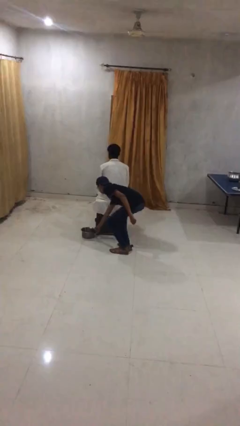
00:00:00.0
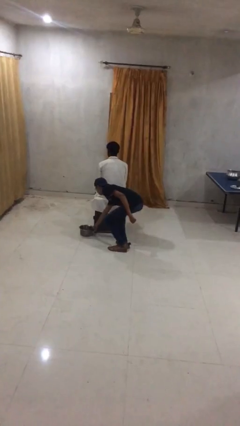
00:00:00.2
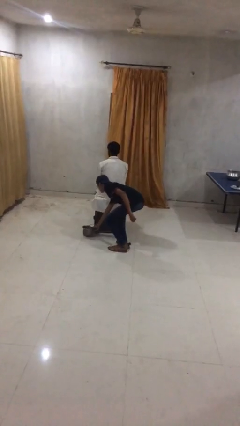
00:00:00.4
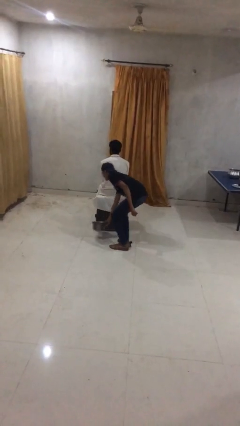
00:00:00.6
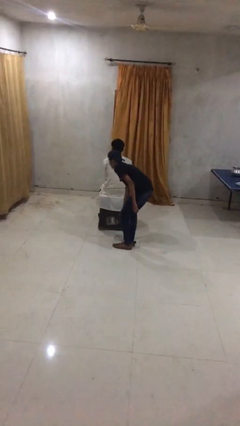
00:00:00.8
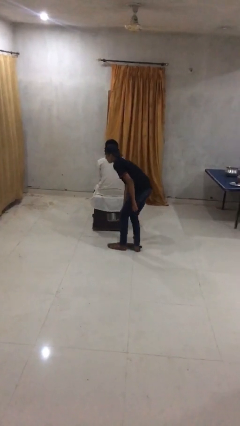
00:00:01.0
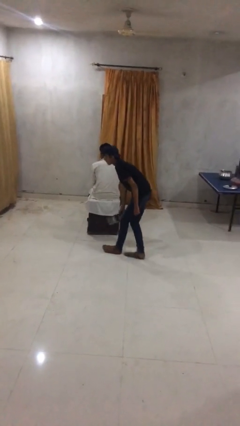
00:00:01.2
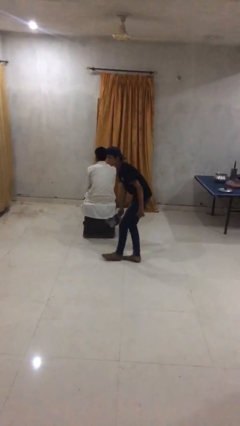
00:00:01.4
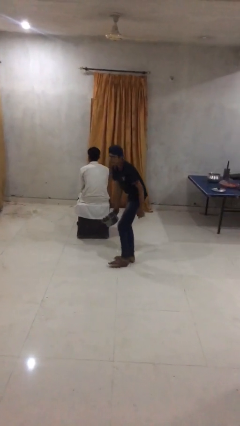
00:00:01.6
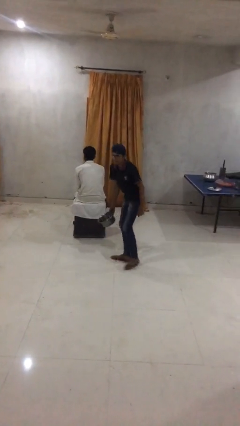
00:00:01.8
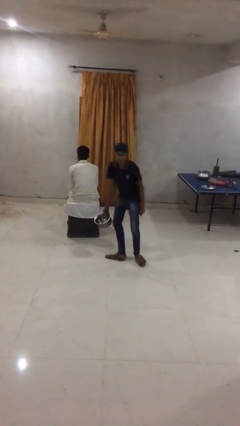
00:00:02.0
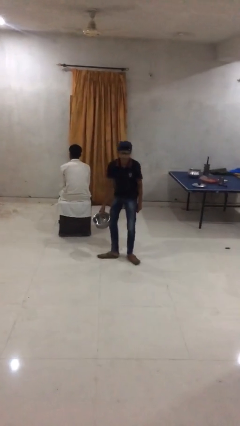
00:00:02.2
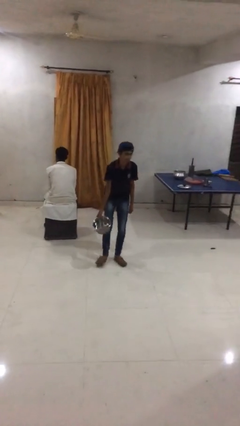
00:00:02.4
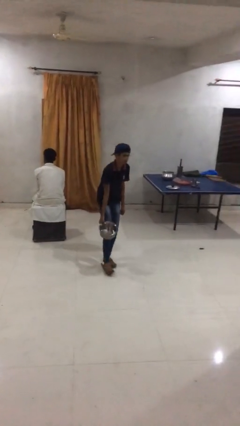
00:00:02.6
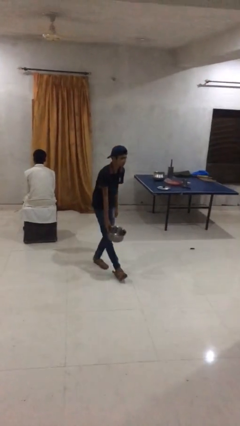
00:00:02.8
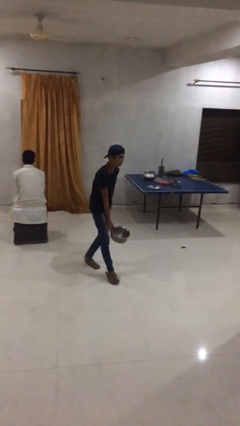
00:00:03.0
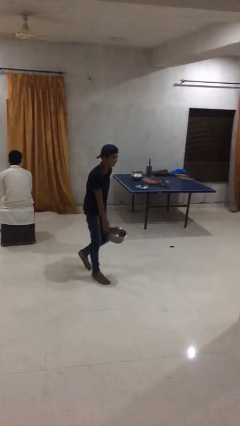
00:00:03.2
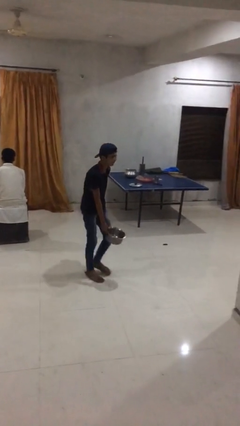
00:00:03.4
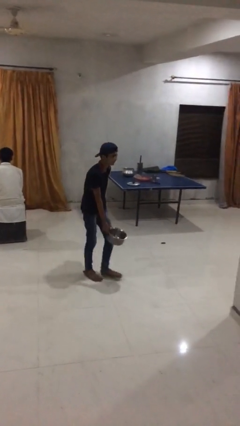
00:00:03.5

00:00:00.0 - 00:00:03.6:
person steals object from person

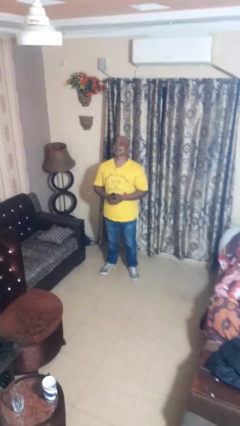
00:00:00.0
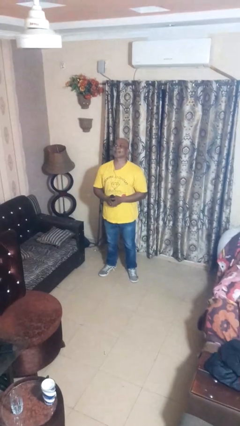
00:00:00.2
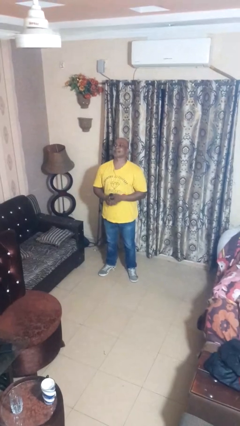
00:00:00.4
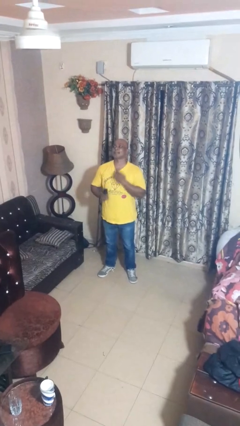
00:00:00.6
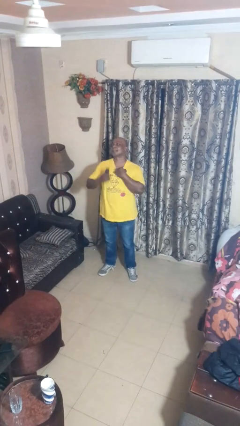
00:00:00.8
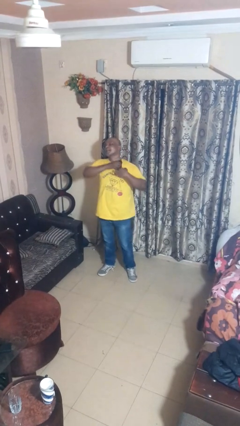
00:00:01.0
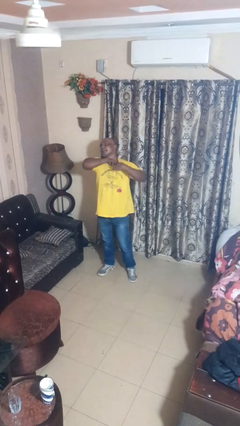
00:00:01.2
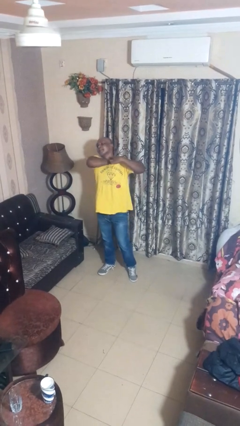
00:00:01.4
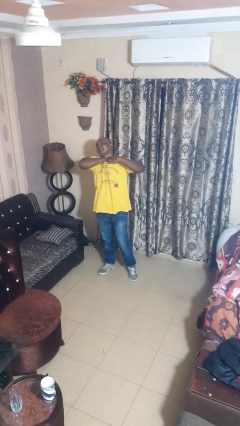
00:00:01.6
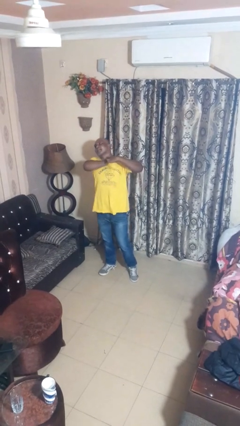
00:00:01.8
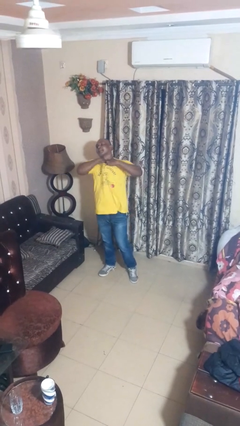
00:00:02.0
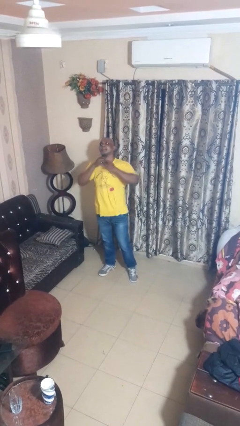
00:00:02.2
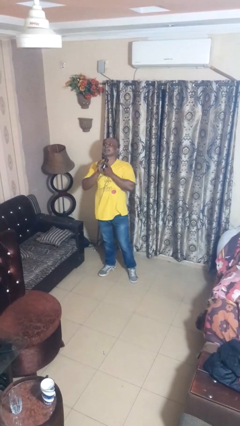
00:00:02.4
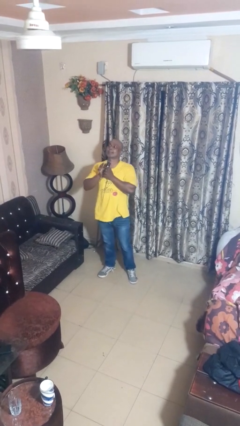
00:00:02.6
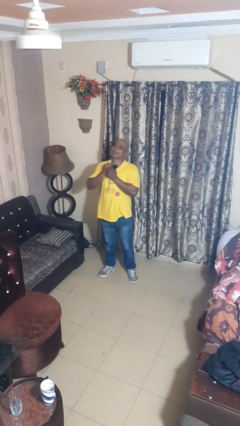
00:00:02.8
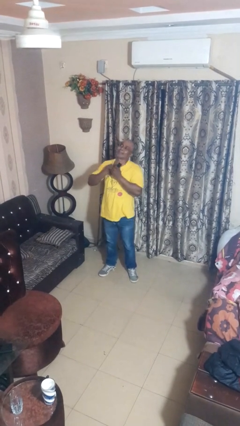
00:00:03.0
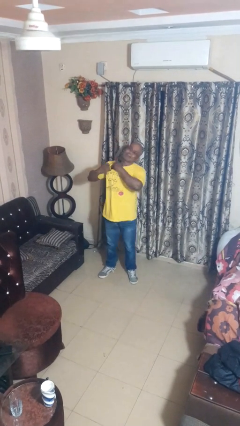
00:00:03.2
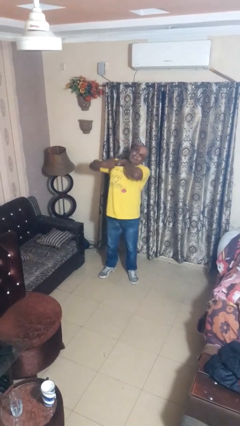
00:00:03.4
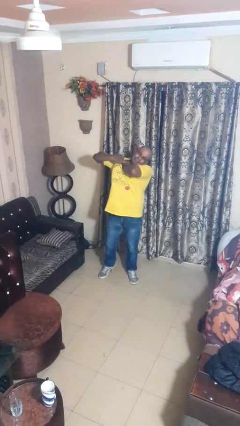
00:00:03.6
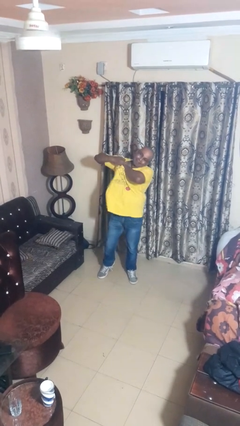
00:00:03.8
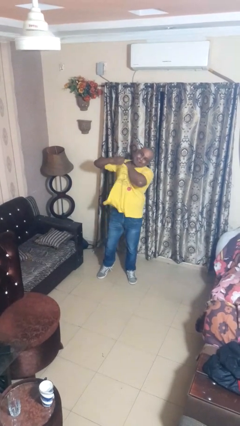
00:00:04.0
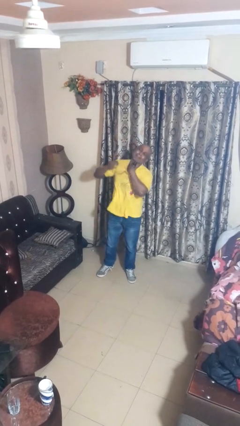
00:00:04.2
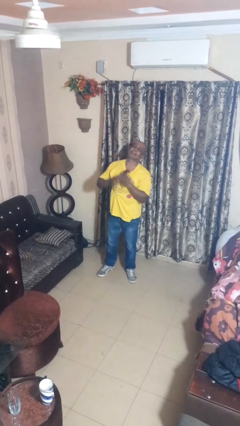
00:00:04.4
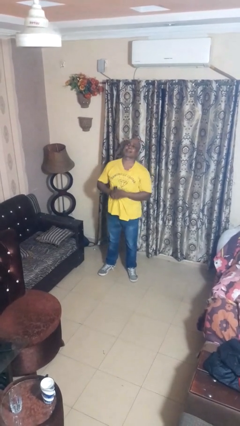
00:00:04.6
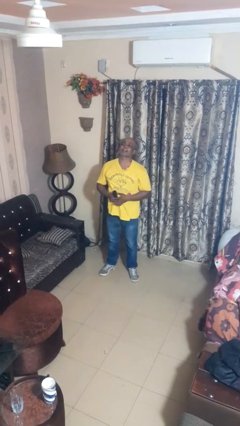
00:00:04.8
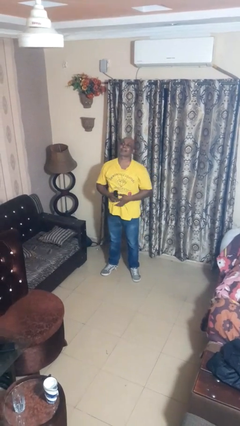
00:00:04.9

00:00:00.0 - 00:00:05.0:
person applies deodorant

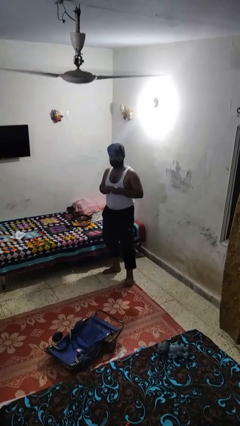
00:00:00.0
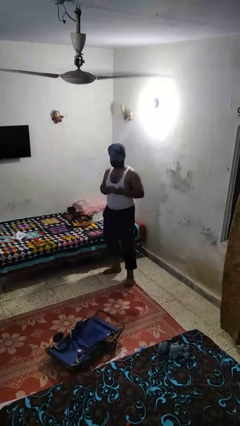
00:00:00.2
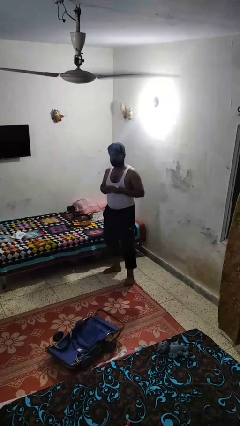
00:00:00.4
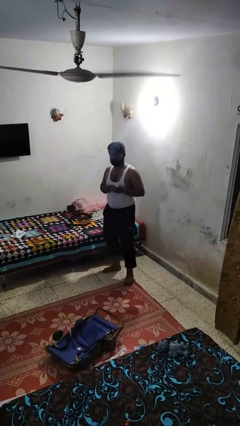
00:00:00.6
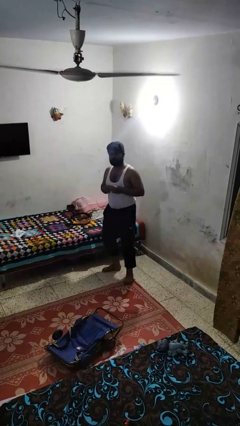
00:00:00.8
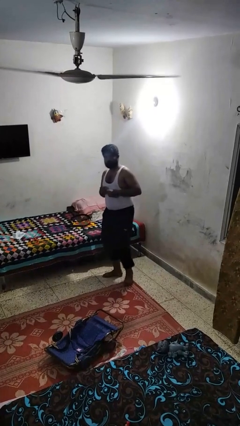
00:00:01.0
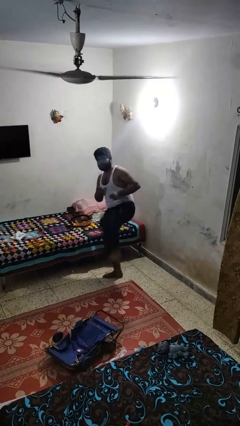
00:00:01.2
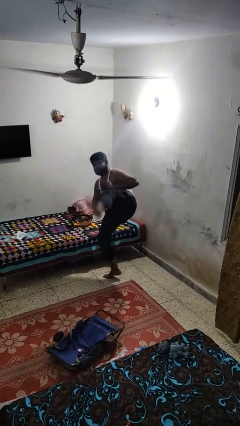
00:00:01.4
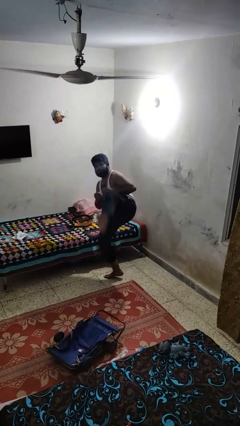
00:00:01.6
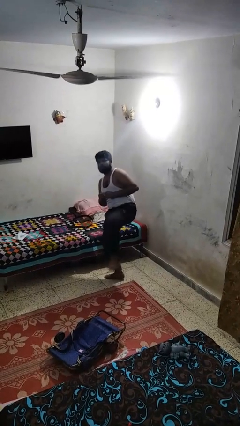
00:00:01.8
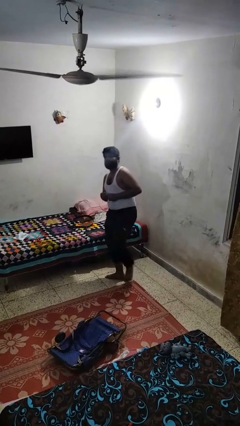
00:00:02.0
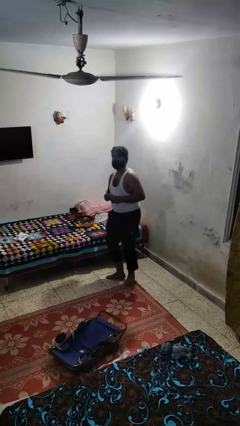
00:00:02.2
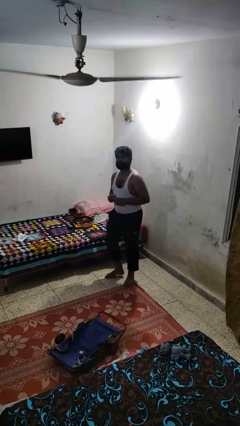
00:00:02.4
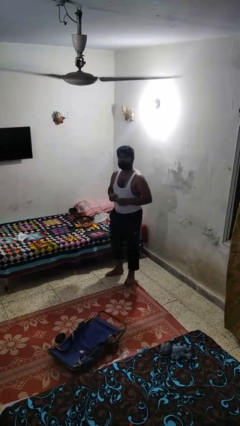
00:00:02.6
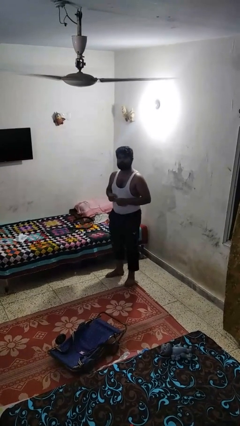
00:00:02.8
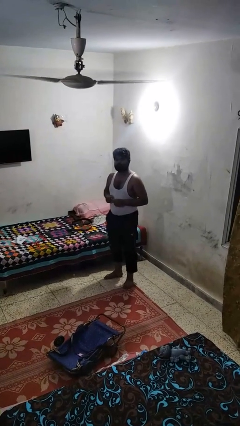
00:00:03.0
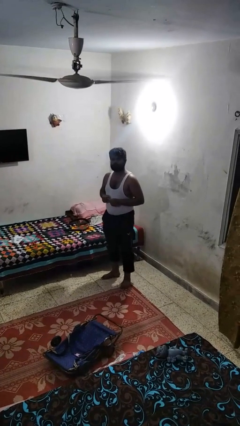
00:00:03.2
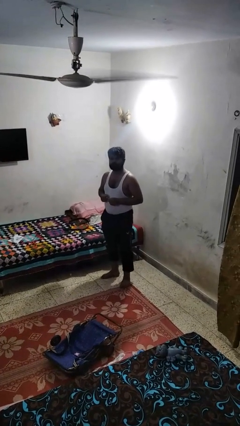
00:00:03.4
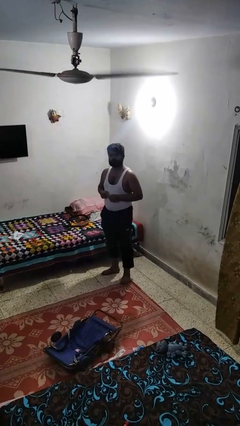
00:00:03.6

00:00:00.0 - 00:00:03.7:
person karate kicks

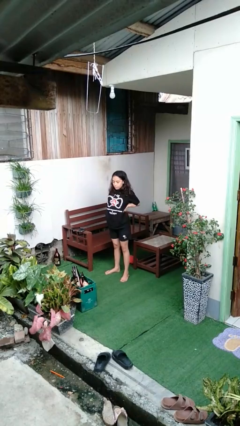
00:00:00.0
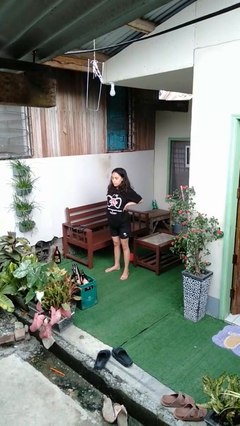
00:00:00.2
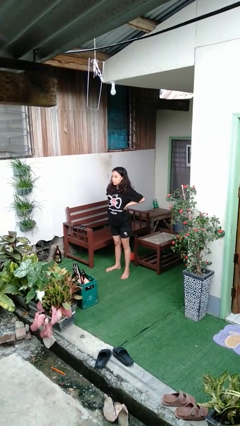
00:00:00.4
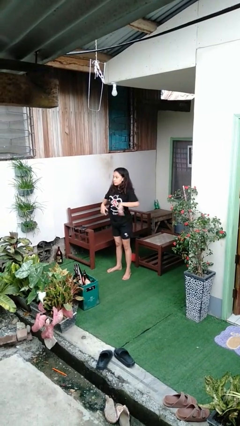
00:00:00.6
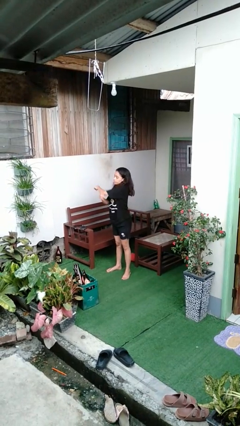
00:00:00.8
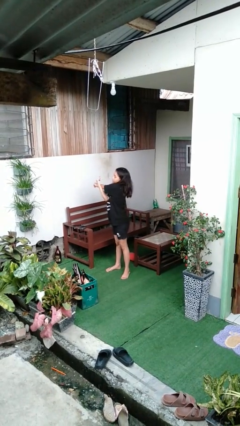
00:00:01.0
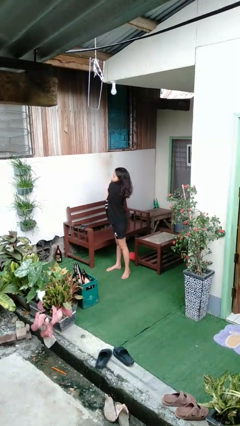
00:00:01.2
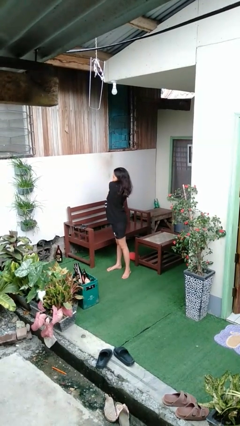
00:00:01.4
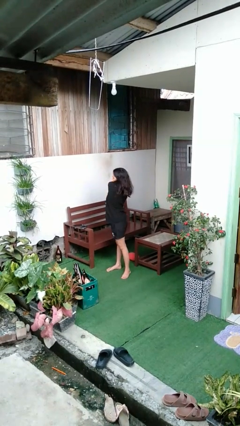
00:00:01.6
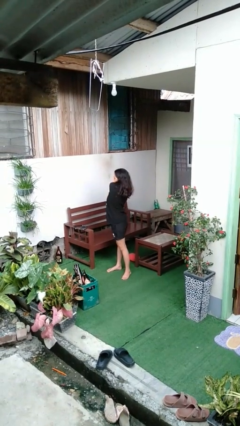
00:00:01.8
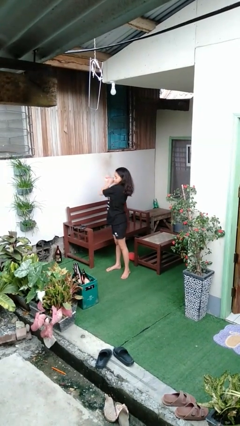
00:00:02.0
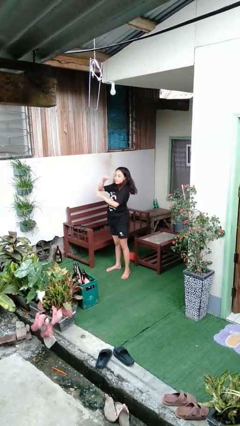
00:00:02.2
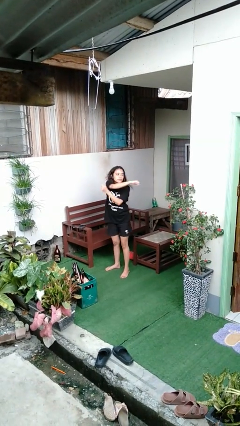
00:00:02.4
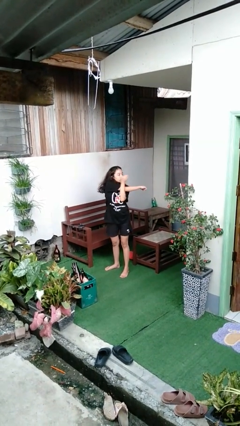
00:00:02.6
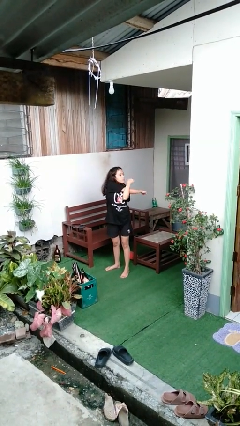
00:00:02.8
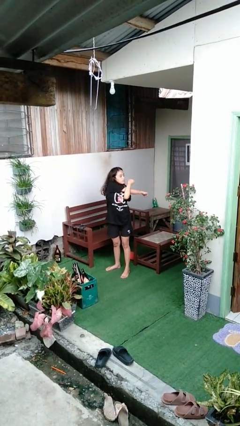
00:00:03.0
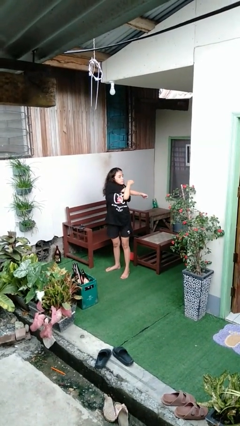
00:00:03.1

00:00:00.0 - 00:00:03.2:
person stretches arms to side

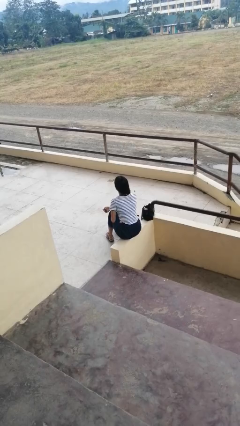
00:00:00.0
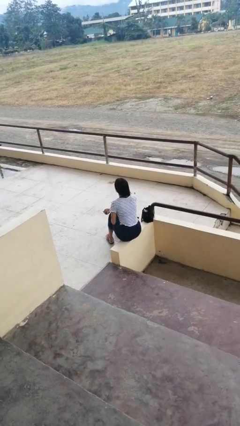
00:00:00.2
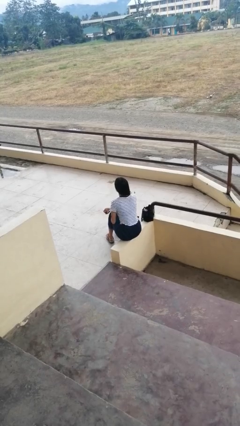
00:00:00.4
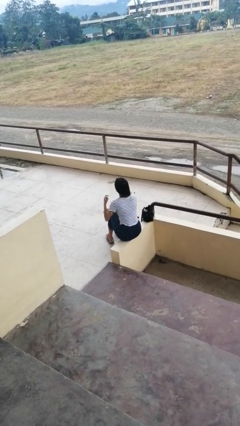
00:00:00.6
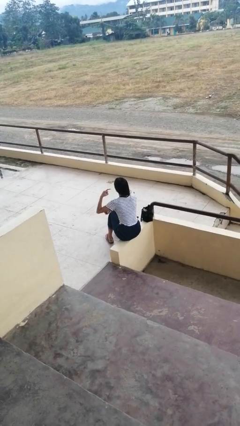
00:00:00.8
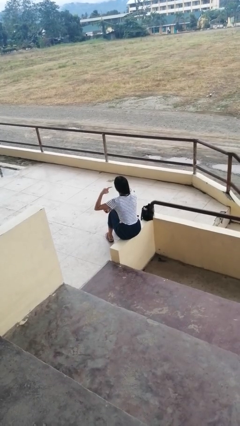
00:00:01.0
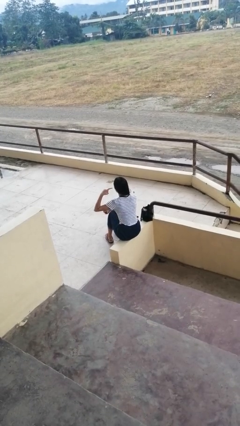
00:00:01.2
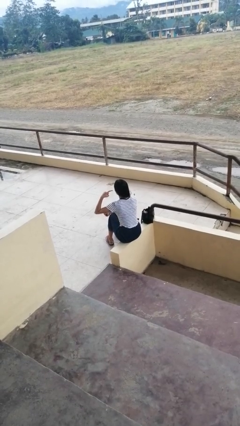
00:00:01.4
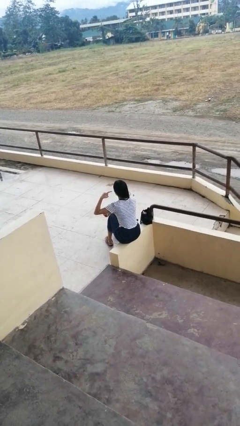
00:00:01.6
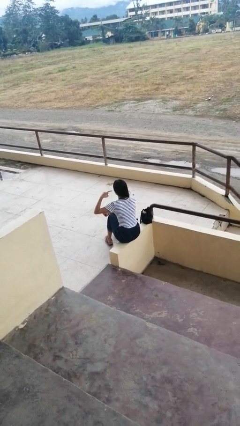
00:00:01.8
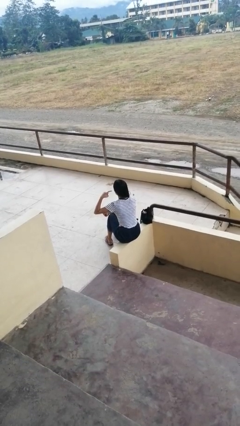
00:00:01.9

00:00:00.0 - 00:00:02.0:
person gestures listen closely
